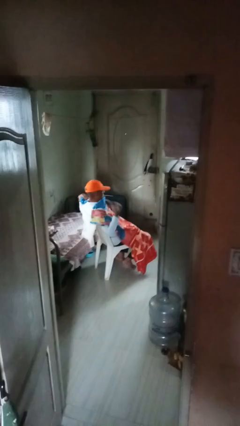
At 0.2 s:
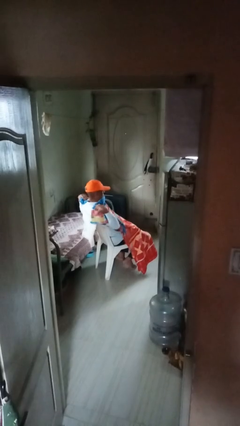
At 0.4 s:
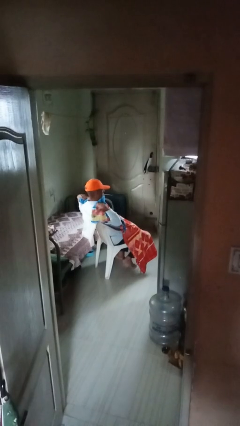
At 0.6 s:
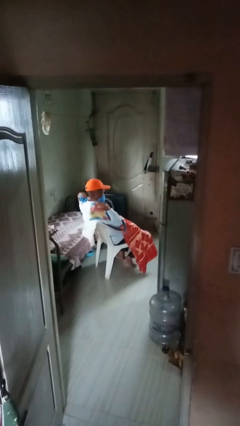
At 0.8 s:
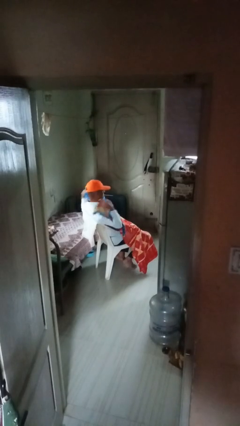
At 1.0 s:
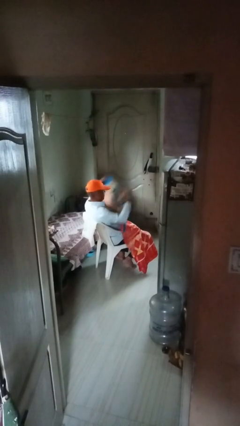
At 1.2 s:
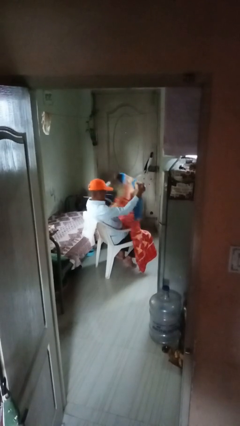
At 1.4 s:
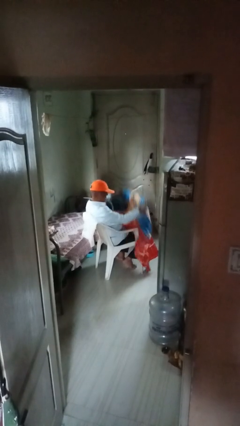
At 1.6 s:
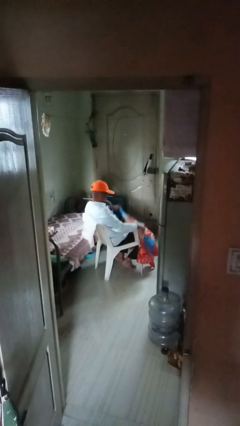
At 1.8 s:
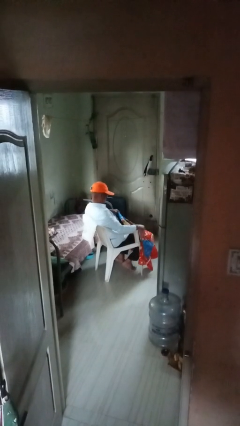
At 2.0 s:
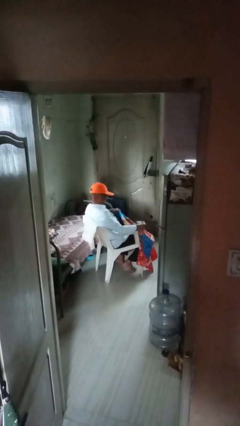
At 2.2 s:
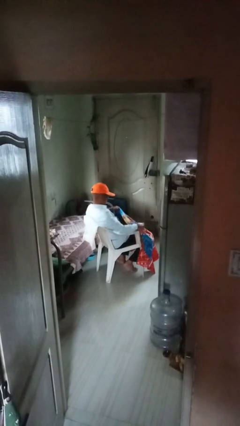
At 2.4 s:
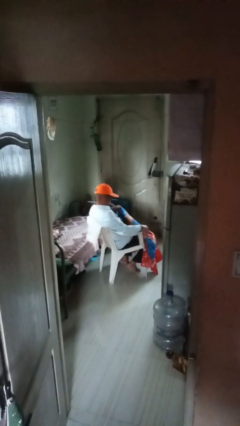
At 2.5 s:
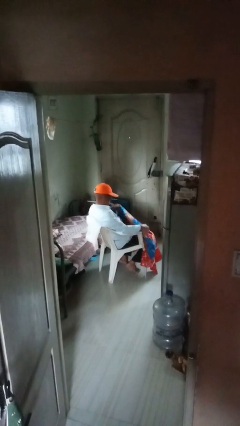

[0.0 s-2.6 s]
person uncovers with blanket

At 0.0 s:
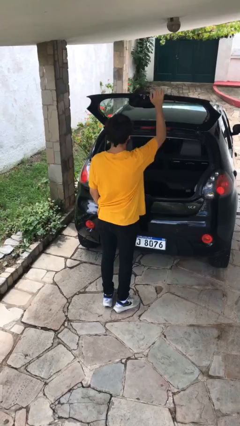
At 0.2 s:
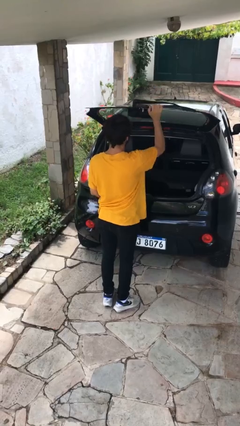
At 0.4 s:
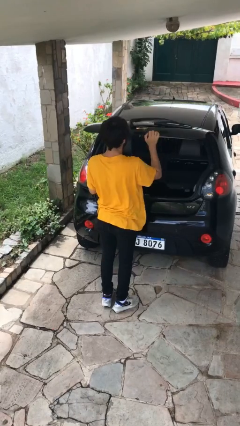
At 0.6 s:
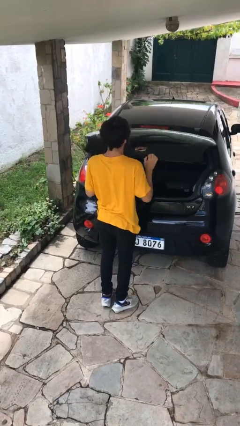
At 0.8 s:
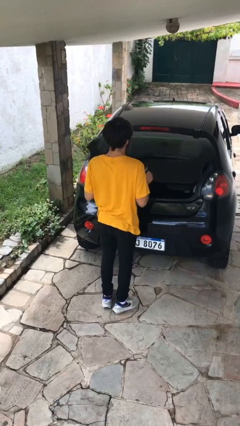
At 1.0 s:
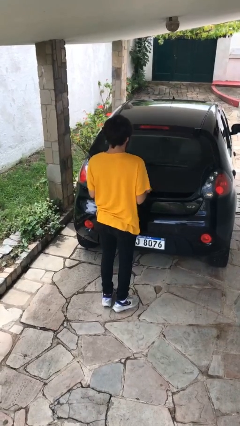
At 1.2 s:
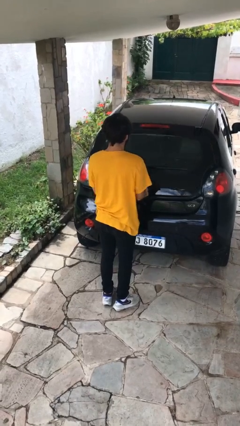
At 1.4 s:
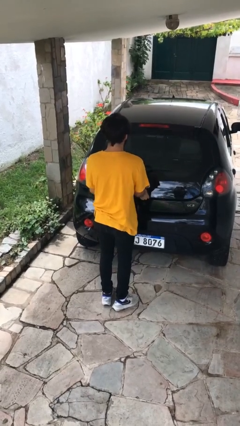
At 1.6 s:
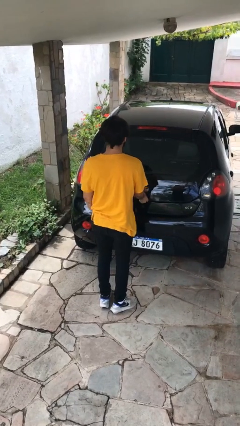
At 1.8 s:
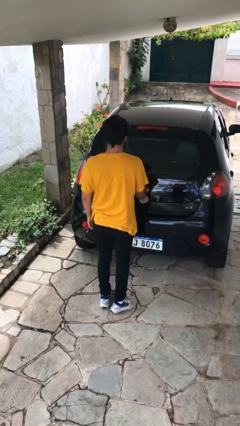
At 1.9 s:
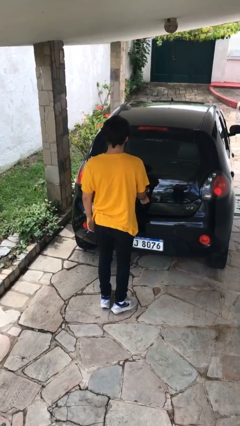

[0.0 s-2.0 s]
person closes car trunk

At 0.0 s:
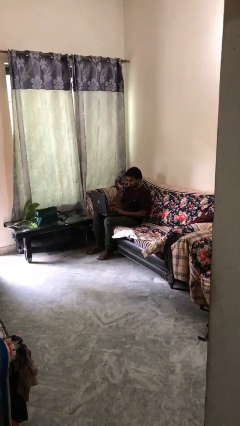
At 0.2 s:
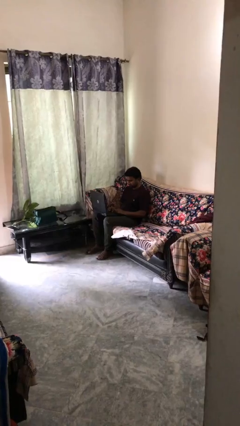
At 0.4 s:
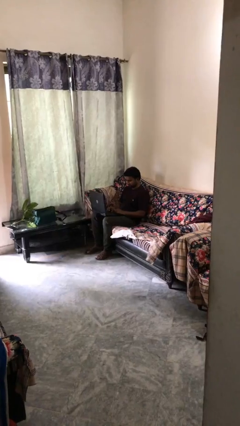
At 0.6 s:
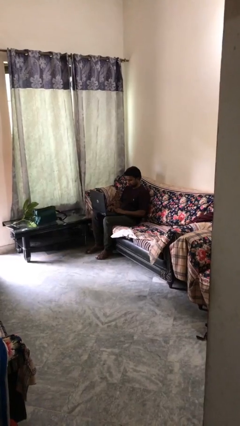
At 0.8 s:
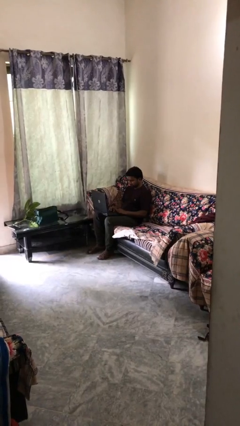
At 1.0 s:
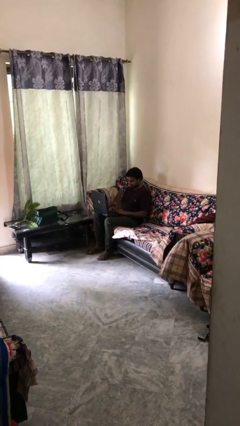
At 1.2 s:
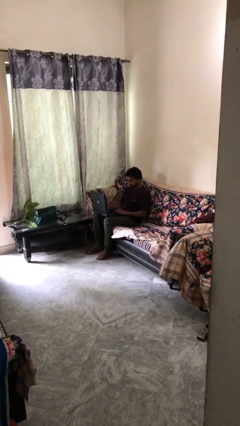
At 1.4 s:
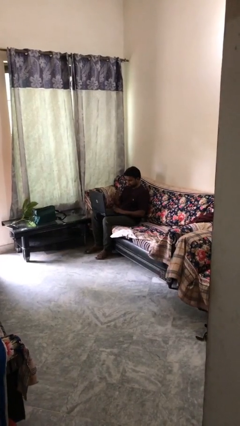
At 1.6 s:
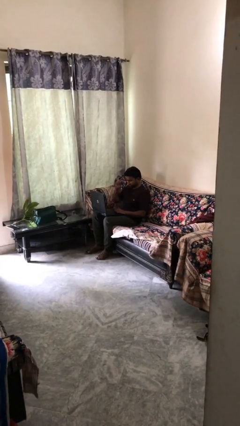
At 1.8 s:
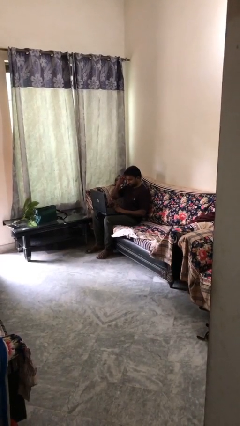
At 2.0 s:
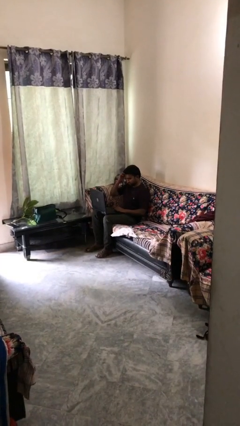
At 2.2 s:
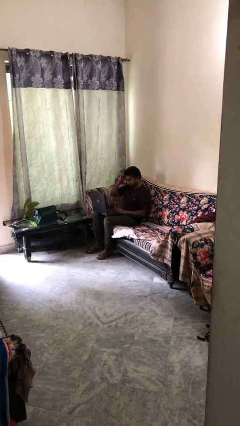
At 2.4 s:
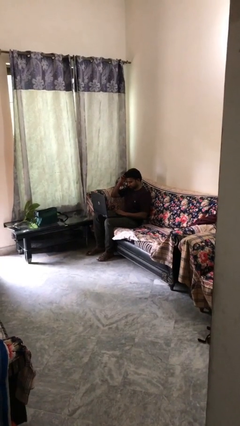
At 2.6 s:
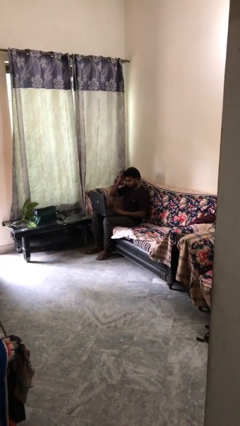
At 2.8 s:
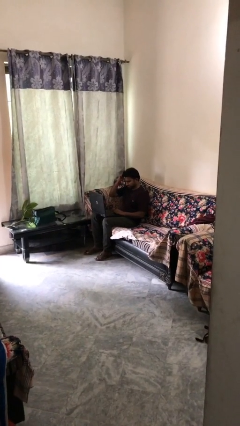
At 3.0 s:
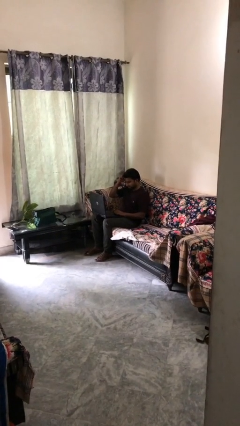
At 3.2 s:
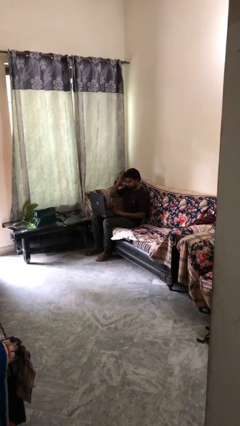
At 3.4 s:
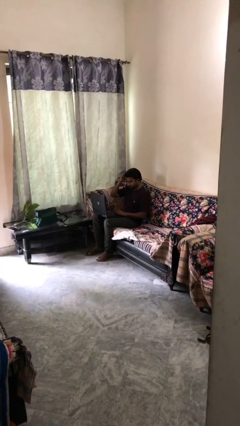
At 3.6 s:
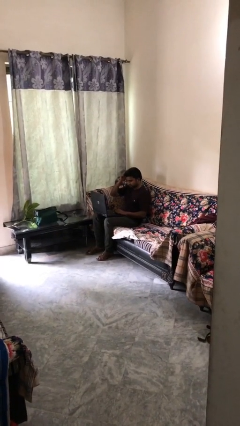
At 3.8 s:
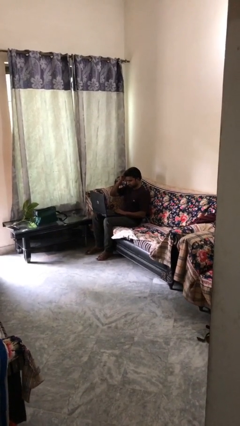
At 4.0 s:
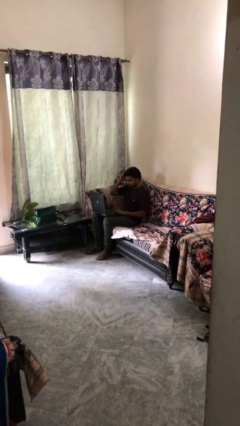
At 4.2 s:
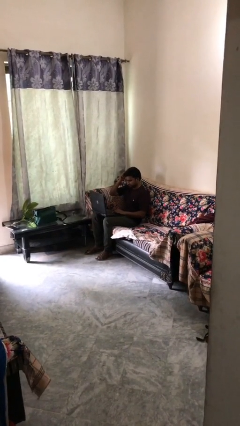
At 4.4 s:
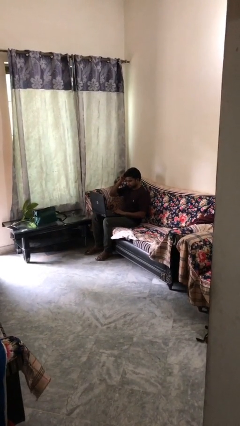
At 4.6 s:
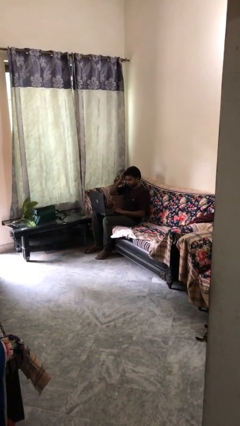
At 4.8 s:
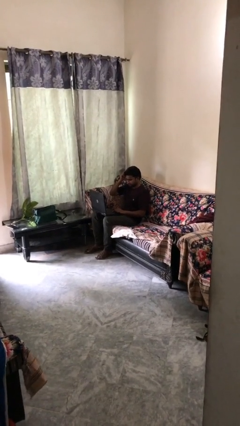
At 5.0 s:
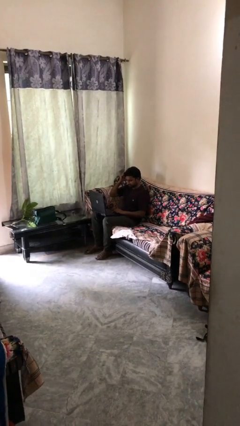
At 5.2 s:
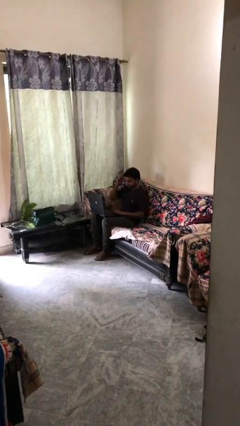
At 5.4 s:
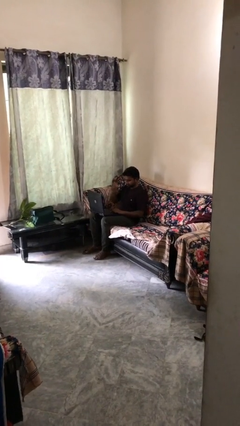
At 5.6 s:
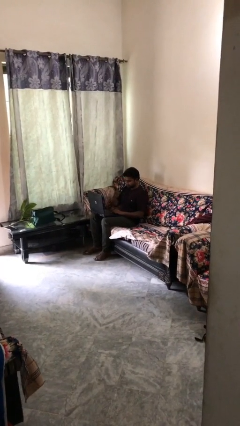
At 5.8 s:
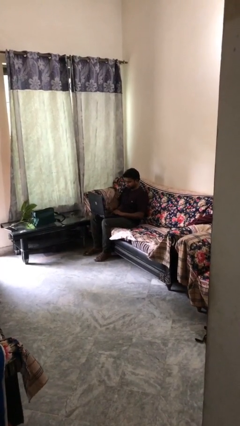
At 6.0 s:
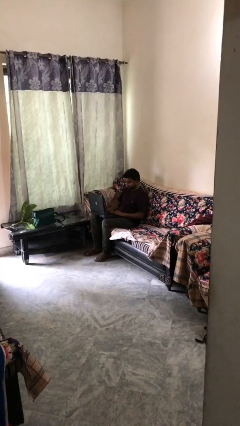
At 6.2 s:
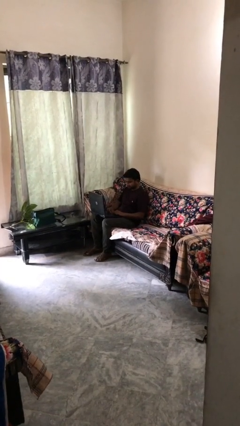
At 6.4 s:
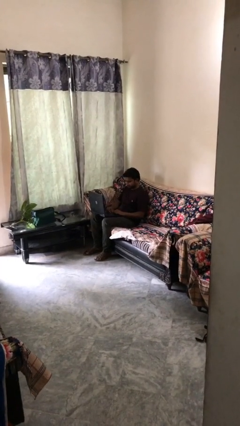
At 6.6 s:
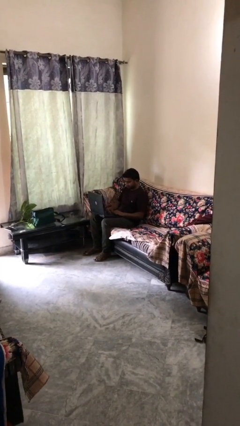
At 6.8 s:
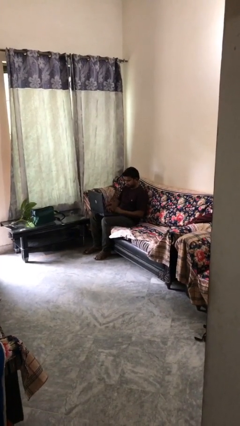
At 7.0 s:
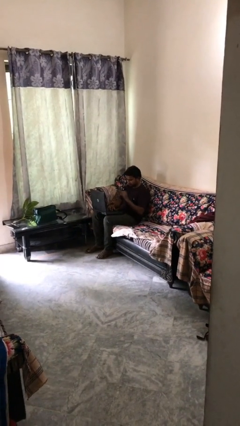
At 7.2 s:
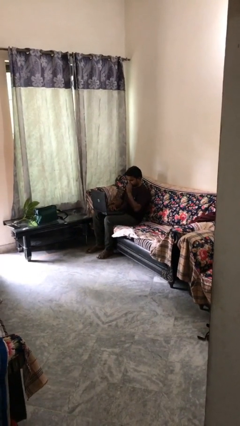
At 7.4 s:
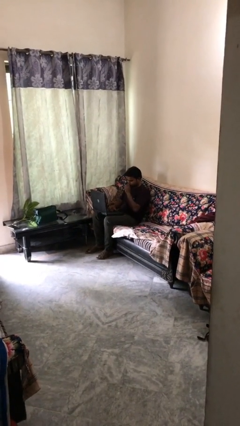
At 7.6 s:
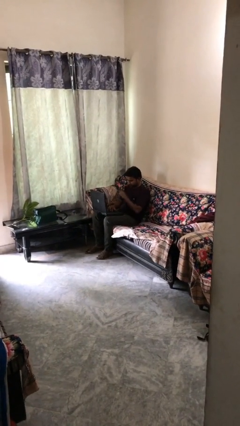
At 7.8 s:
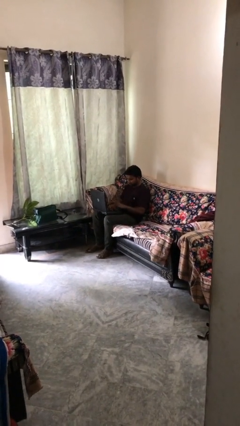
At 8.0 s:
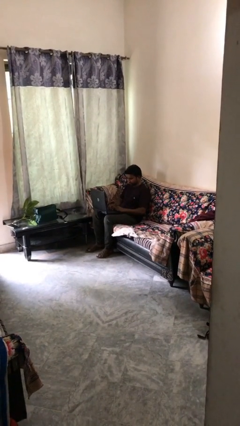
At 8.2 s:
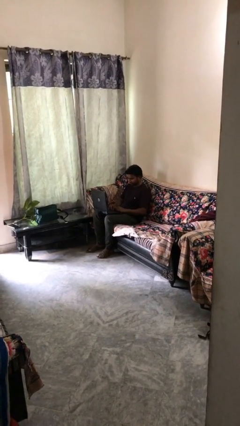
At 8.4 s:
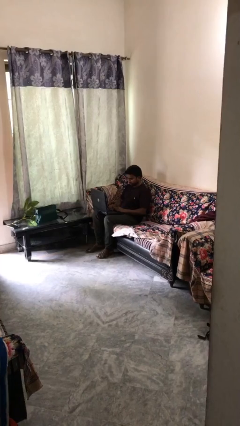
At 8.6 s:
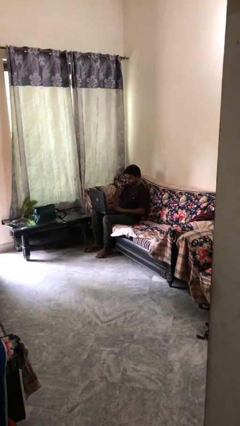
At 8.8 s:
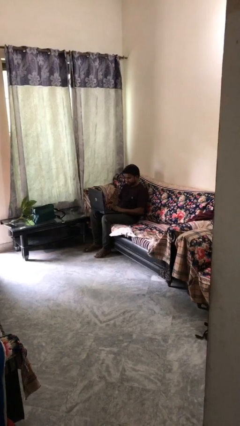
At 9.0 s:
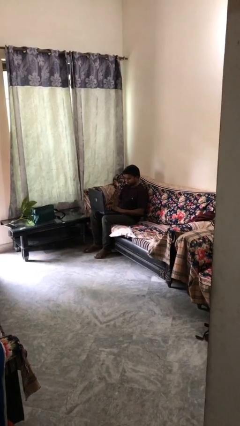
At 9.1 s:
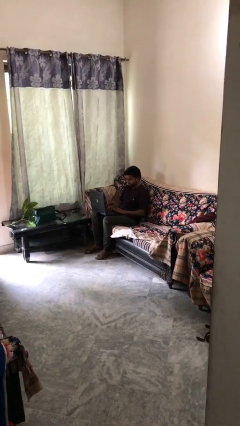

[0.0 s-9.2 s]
person interacts with laptop

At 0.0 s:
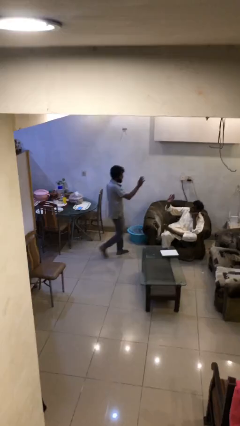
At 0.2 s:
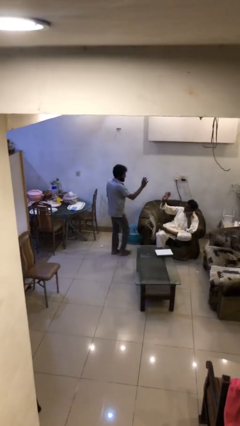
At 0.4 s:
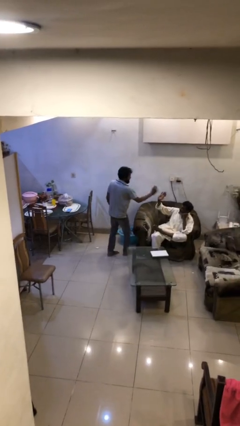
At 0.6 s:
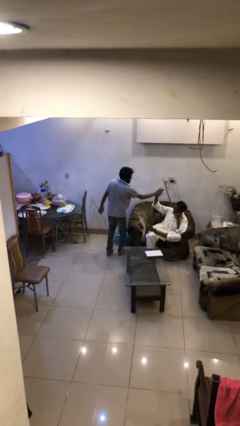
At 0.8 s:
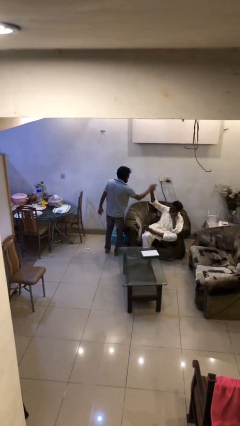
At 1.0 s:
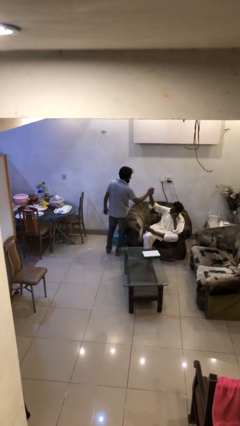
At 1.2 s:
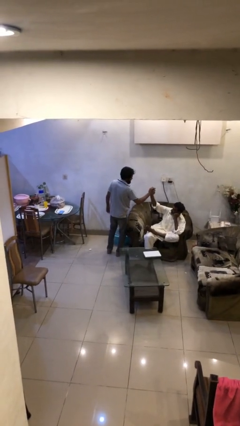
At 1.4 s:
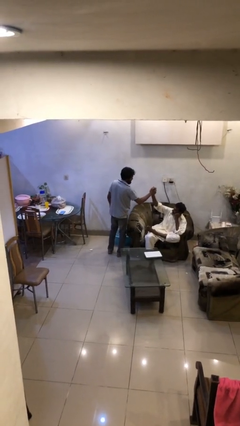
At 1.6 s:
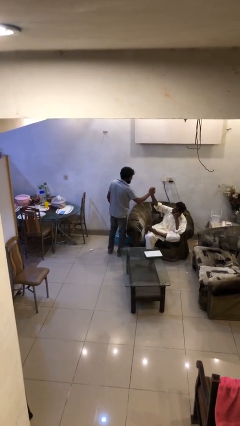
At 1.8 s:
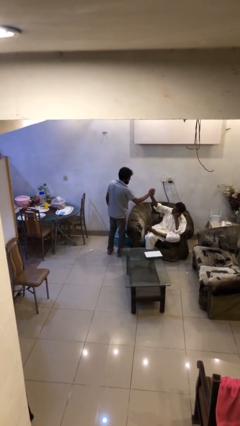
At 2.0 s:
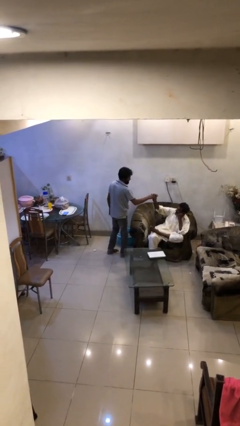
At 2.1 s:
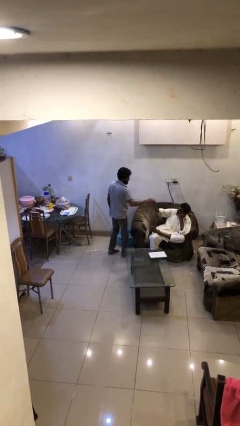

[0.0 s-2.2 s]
person highfives hand

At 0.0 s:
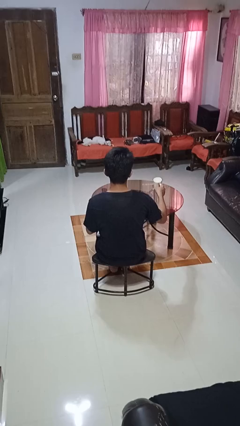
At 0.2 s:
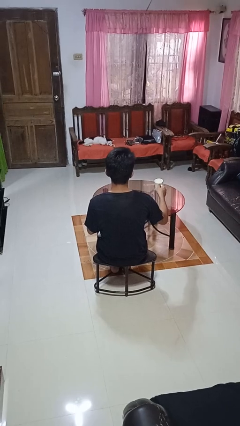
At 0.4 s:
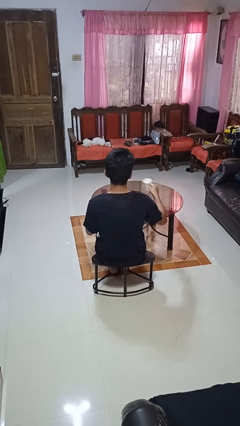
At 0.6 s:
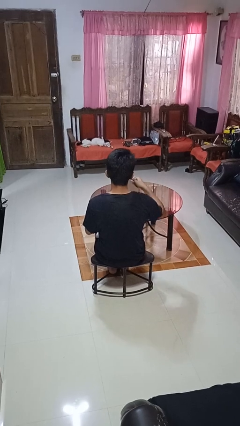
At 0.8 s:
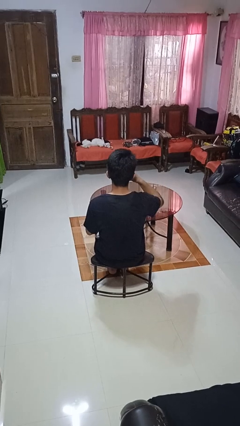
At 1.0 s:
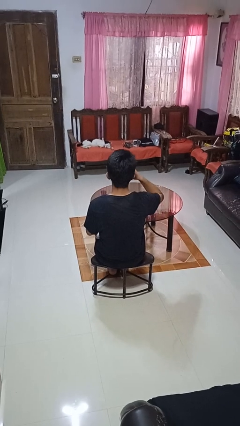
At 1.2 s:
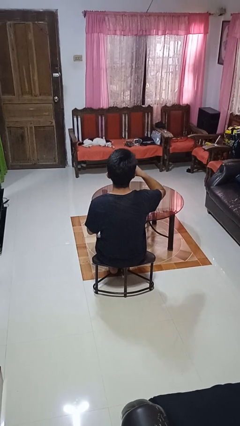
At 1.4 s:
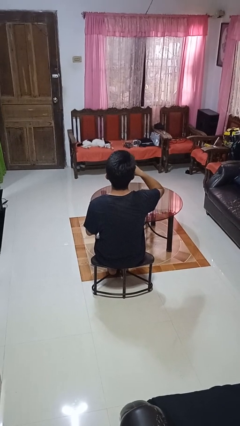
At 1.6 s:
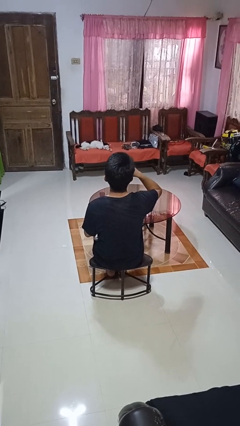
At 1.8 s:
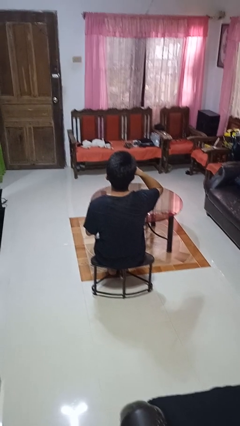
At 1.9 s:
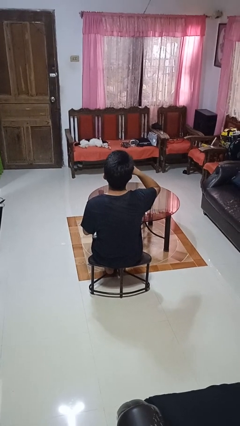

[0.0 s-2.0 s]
person drinks from mug
